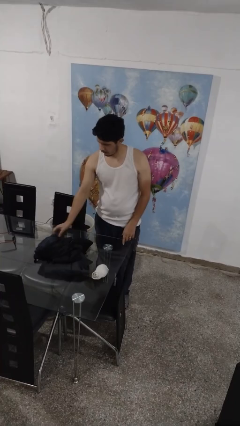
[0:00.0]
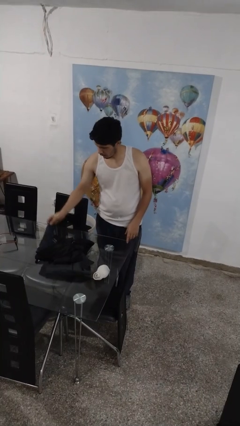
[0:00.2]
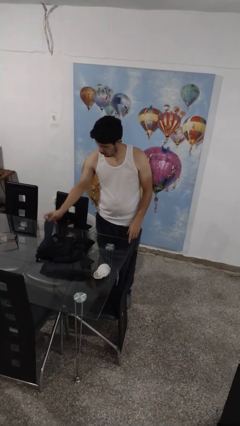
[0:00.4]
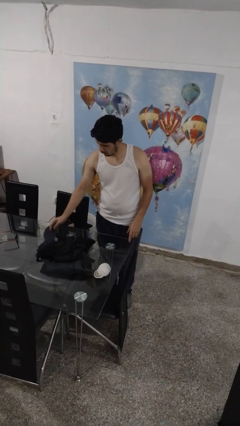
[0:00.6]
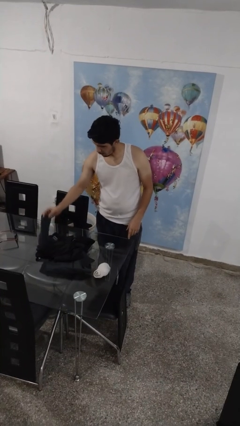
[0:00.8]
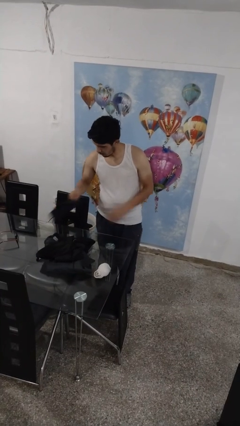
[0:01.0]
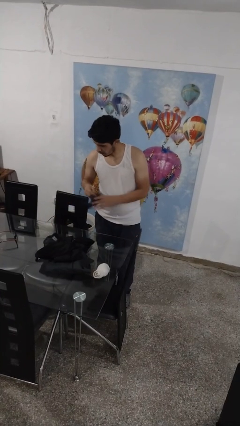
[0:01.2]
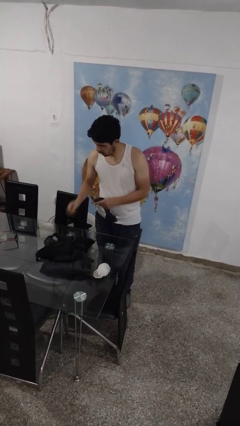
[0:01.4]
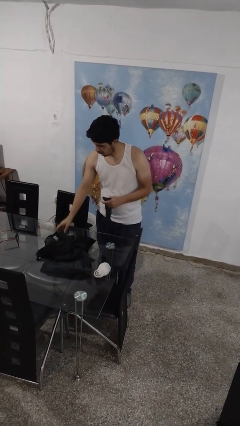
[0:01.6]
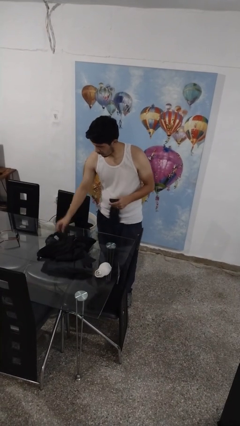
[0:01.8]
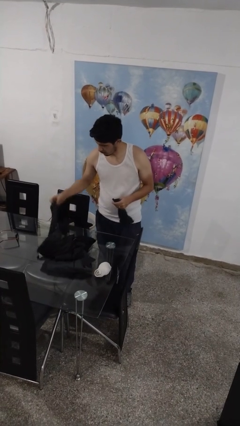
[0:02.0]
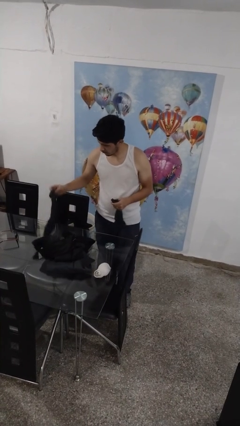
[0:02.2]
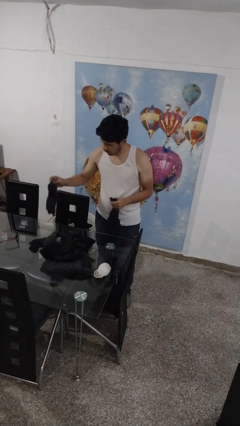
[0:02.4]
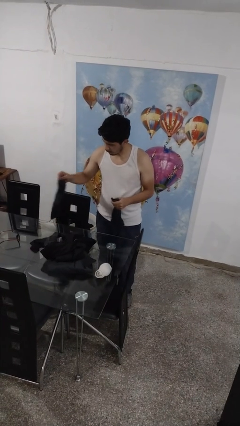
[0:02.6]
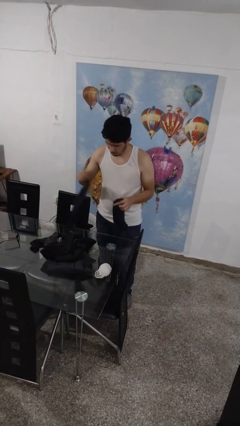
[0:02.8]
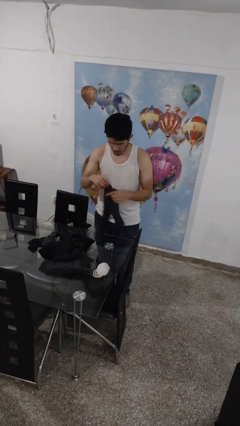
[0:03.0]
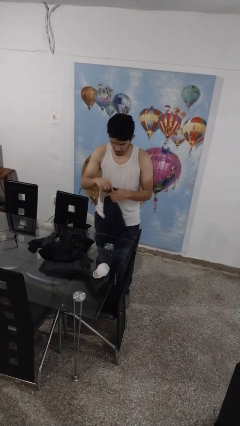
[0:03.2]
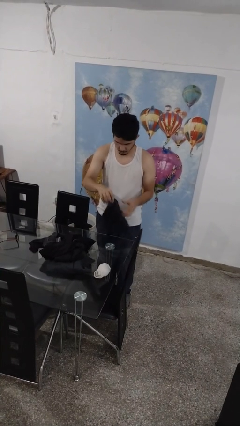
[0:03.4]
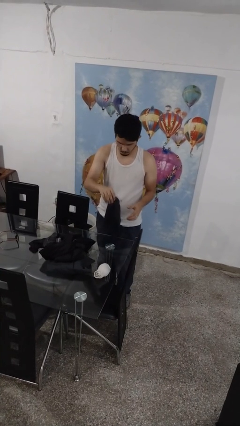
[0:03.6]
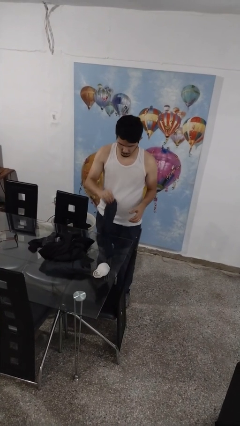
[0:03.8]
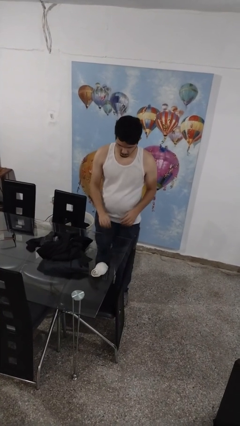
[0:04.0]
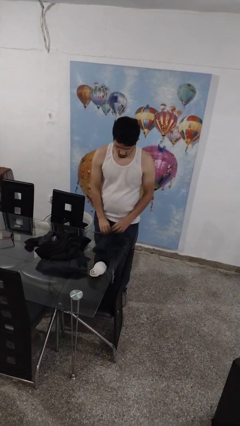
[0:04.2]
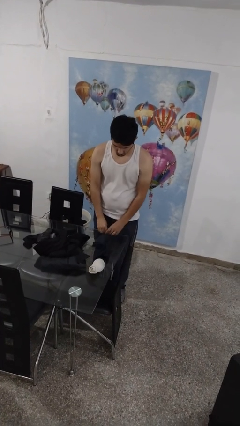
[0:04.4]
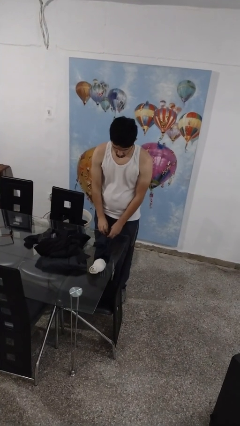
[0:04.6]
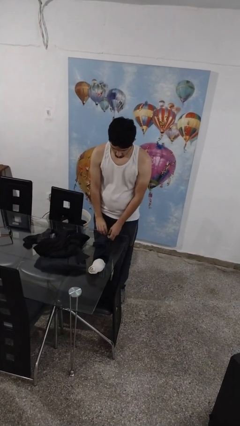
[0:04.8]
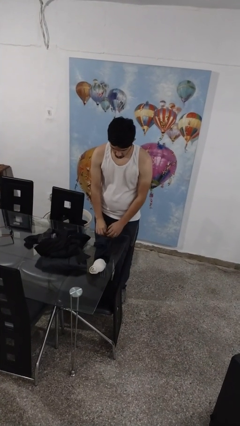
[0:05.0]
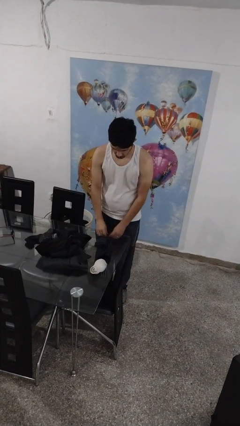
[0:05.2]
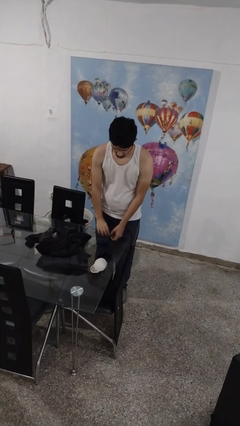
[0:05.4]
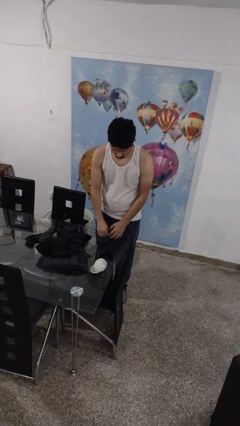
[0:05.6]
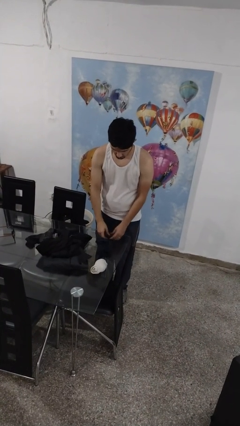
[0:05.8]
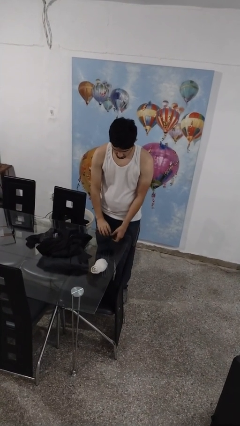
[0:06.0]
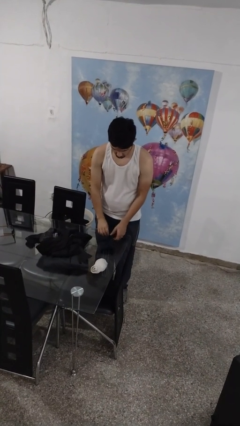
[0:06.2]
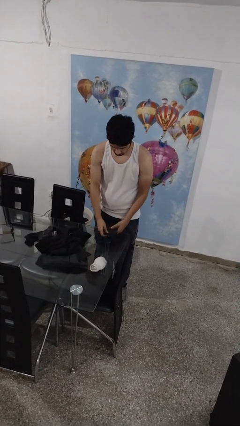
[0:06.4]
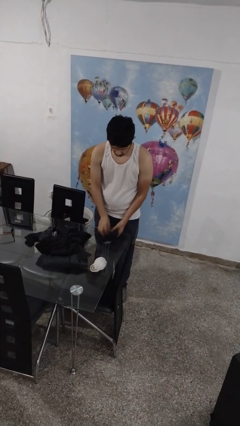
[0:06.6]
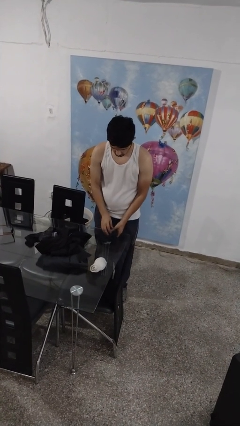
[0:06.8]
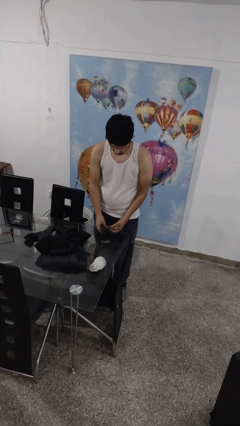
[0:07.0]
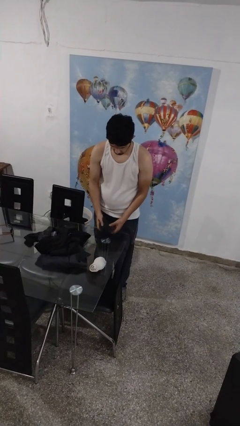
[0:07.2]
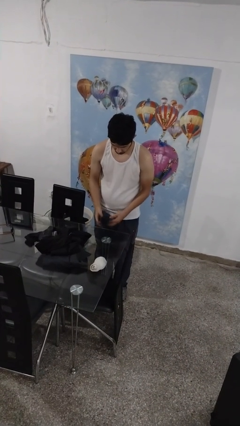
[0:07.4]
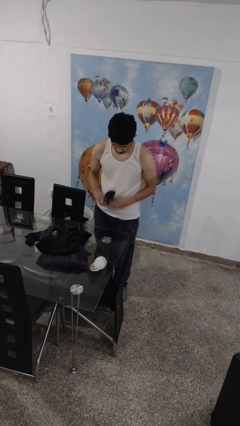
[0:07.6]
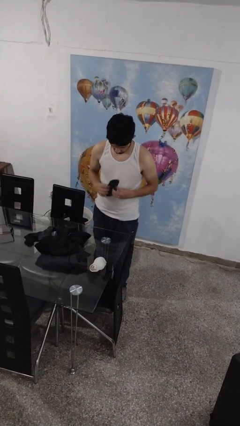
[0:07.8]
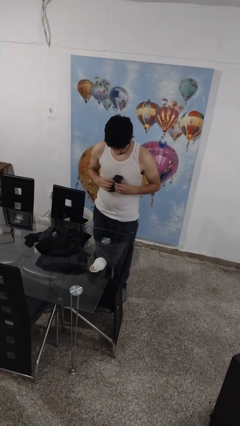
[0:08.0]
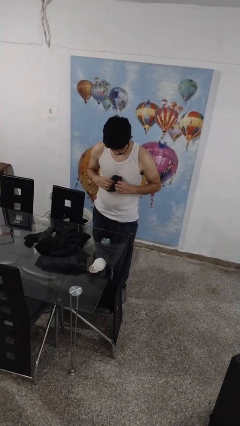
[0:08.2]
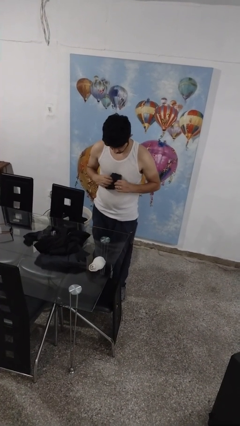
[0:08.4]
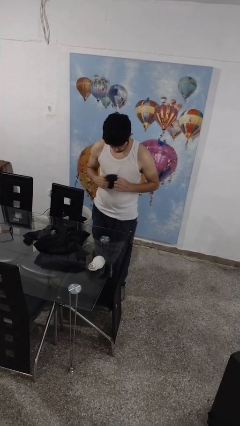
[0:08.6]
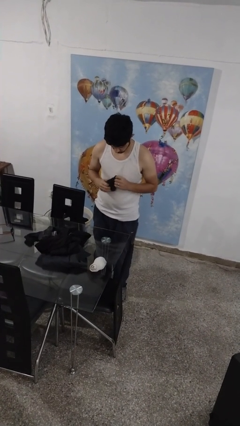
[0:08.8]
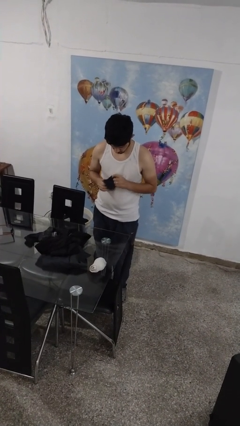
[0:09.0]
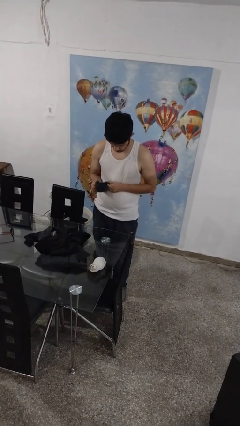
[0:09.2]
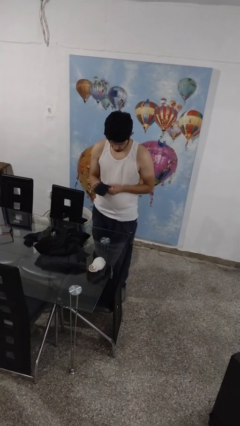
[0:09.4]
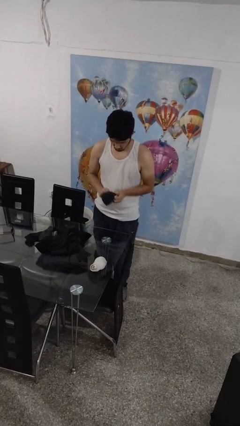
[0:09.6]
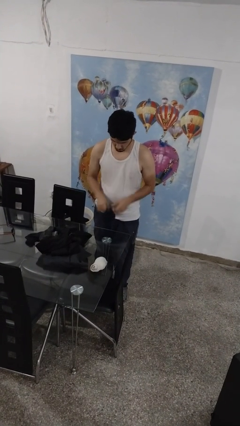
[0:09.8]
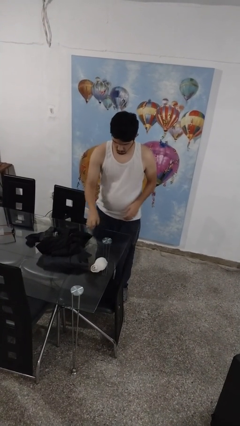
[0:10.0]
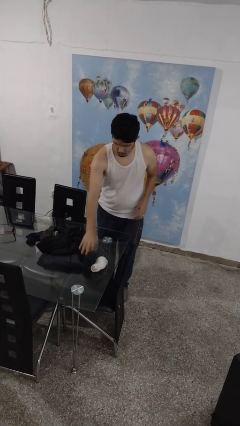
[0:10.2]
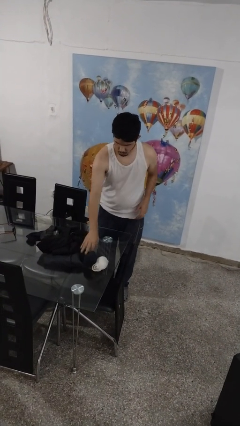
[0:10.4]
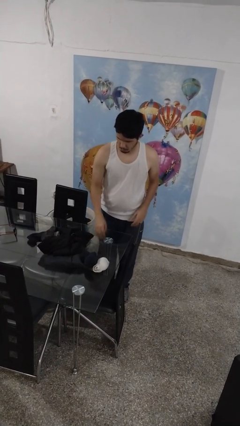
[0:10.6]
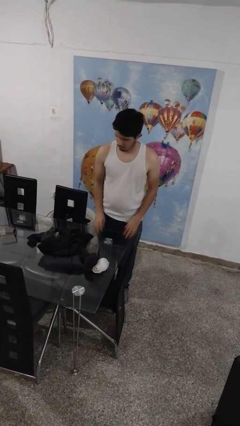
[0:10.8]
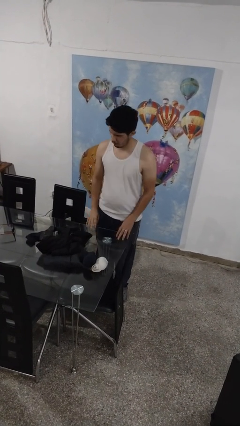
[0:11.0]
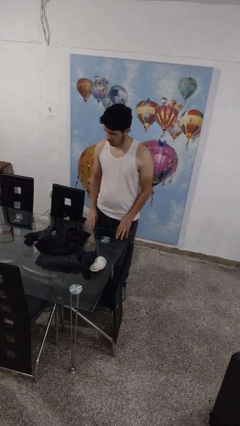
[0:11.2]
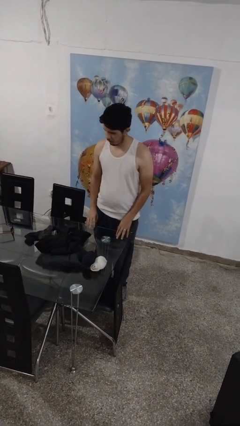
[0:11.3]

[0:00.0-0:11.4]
person folds socks

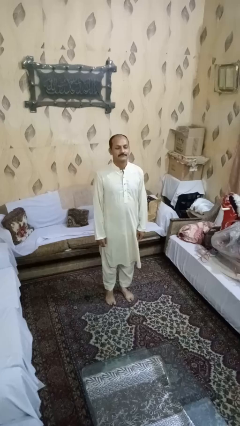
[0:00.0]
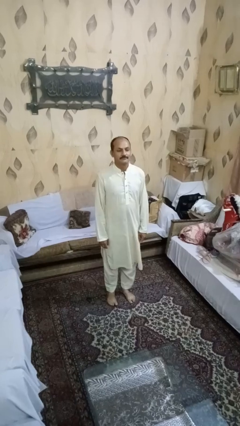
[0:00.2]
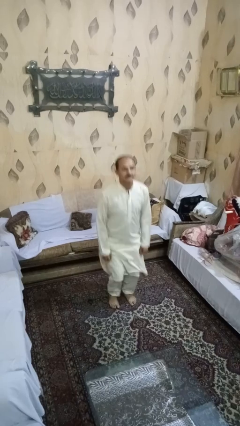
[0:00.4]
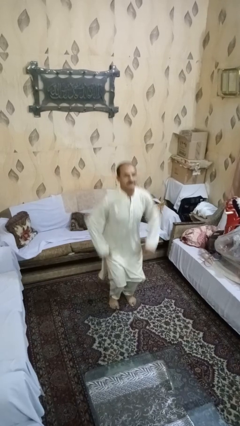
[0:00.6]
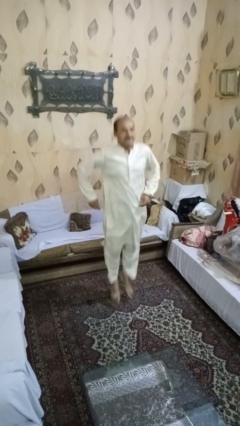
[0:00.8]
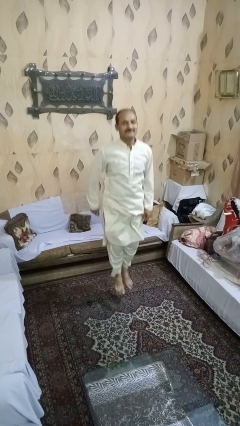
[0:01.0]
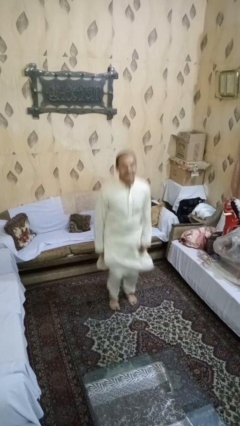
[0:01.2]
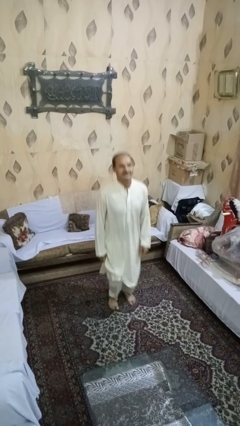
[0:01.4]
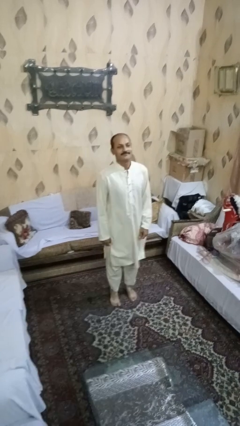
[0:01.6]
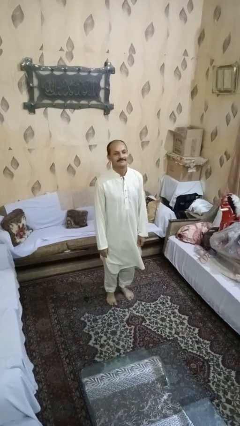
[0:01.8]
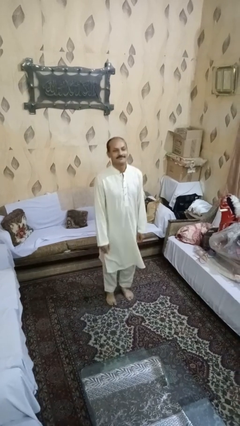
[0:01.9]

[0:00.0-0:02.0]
person jumps

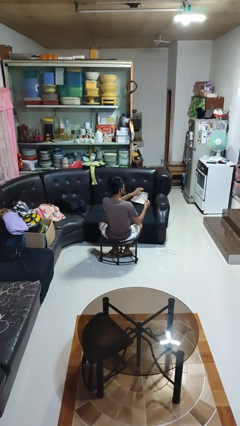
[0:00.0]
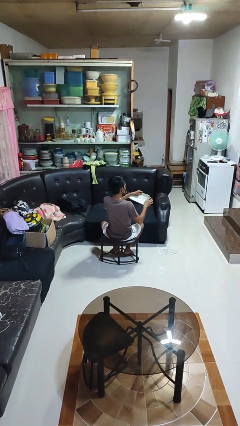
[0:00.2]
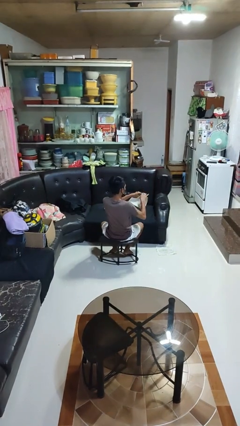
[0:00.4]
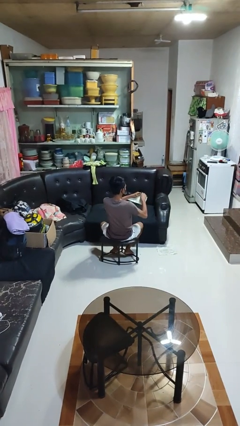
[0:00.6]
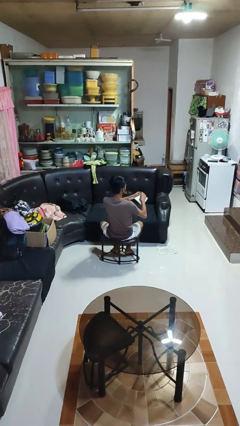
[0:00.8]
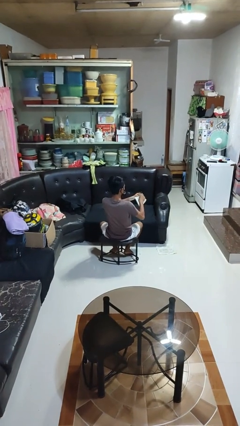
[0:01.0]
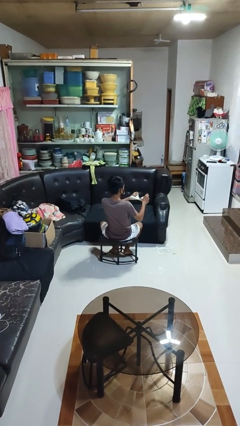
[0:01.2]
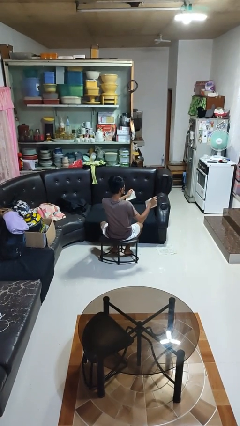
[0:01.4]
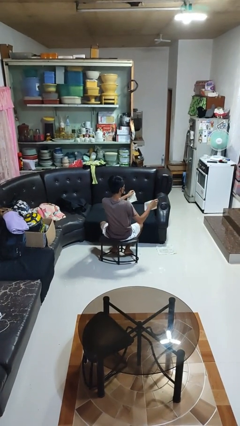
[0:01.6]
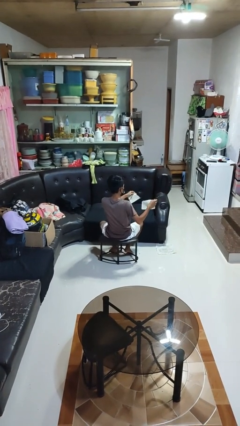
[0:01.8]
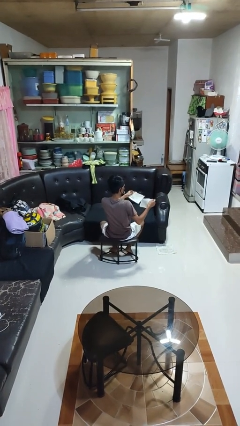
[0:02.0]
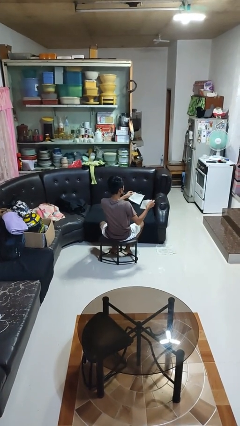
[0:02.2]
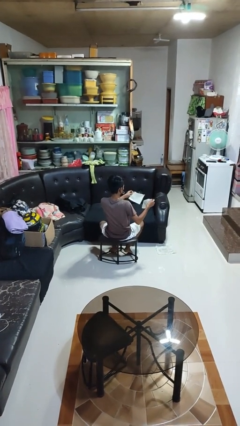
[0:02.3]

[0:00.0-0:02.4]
person tears paper

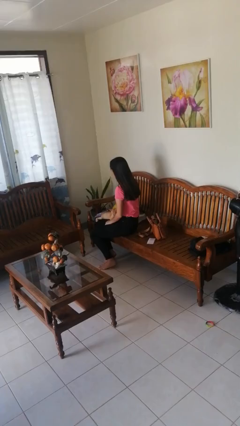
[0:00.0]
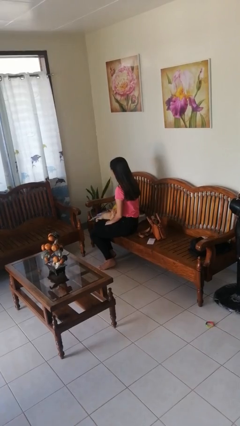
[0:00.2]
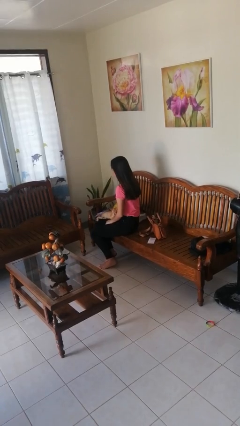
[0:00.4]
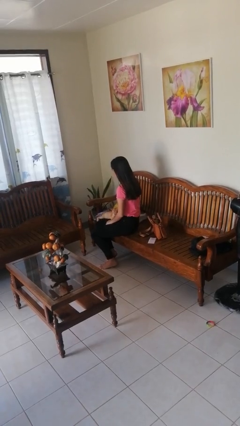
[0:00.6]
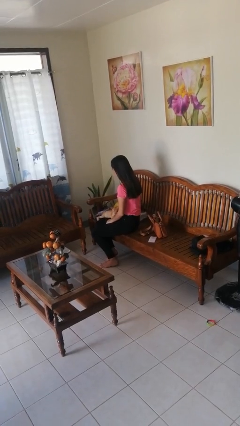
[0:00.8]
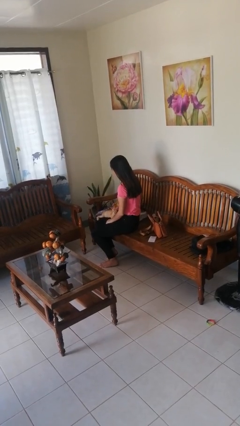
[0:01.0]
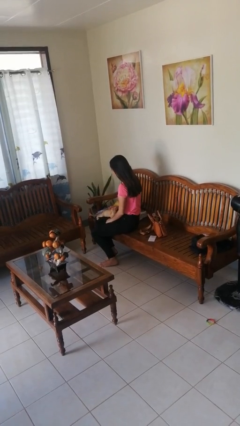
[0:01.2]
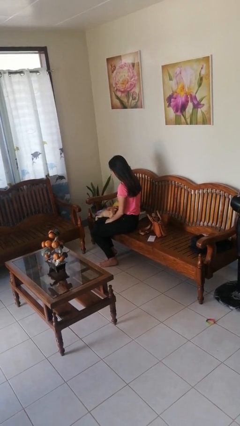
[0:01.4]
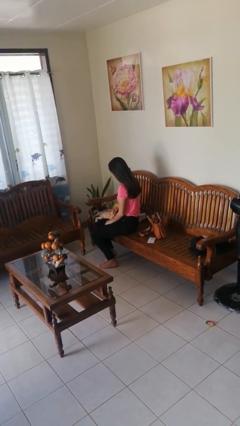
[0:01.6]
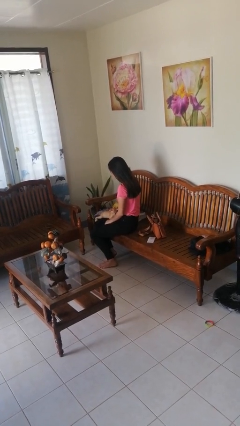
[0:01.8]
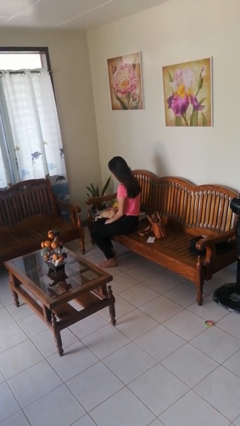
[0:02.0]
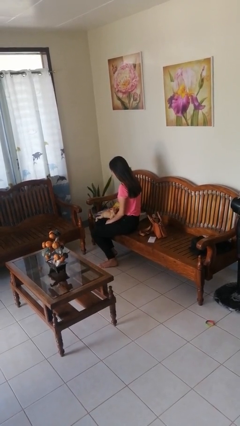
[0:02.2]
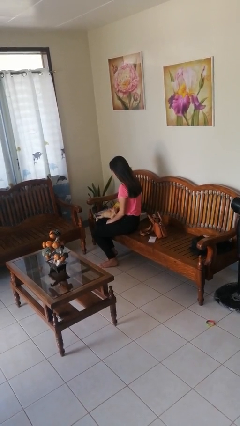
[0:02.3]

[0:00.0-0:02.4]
person pets cat
